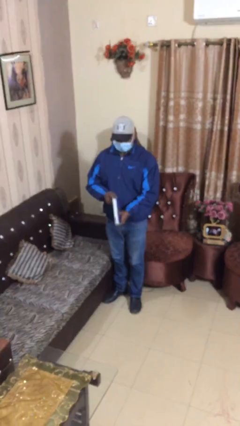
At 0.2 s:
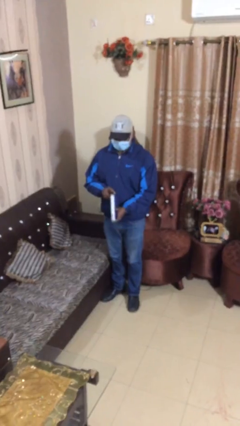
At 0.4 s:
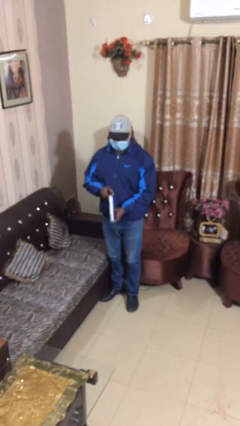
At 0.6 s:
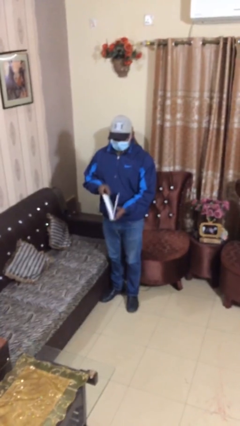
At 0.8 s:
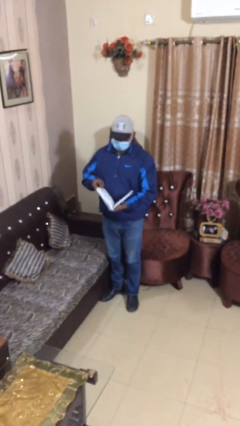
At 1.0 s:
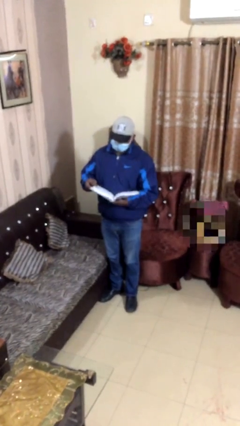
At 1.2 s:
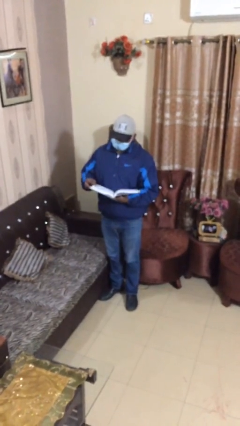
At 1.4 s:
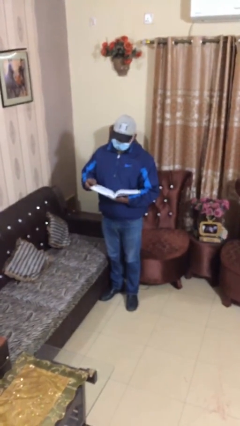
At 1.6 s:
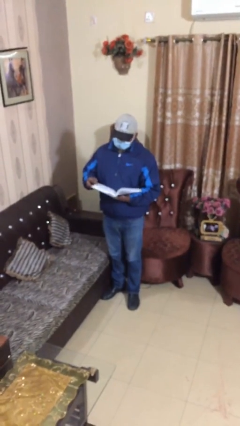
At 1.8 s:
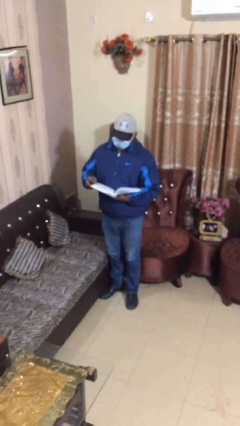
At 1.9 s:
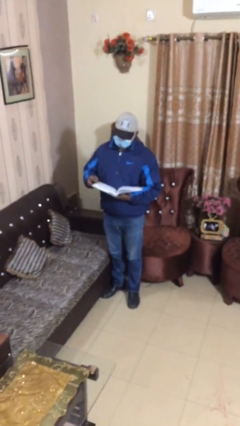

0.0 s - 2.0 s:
person reads document

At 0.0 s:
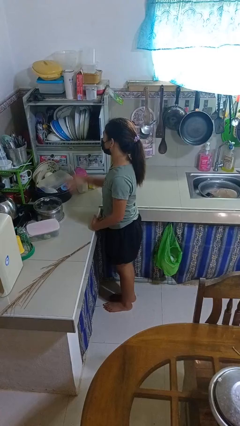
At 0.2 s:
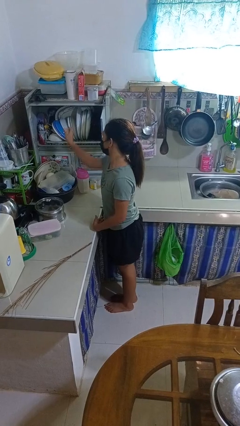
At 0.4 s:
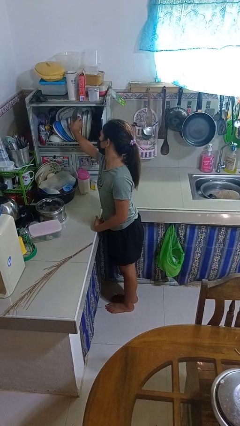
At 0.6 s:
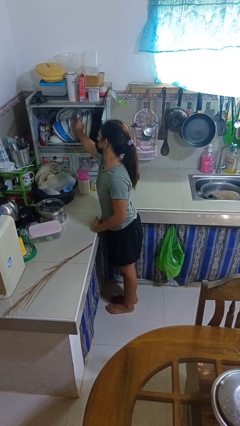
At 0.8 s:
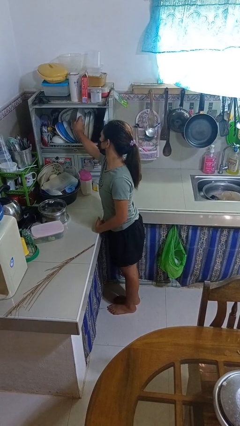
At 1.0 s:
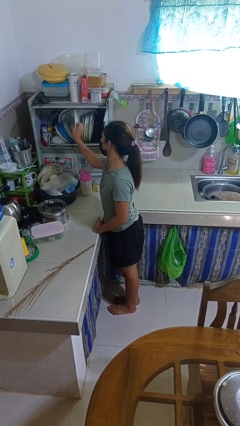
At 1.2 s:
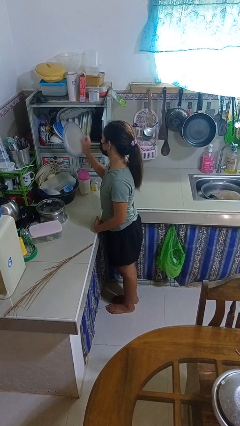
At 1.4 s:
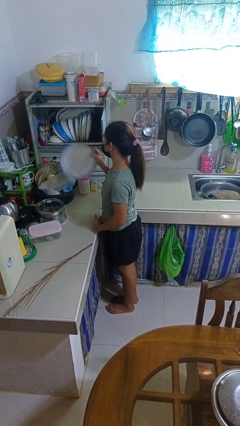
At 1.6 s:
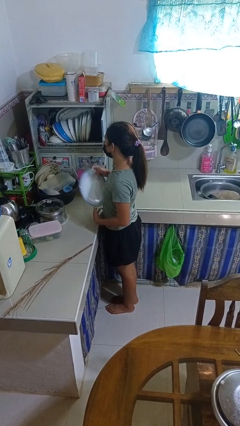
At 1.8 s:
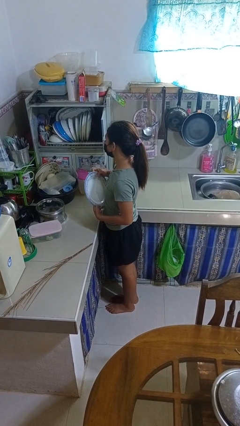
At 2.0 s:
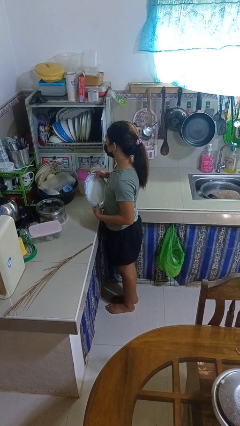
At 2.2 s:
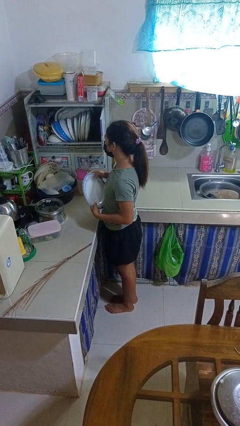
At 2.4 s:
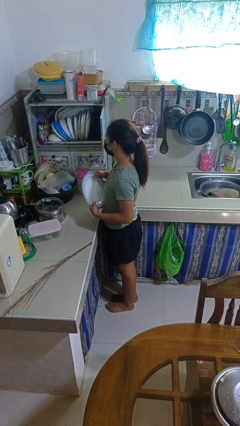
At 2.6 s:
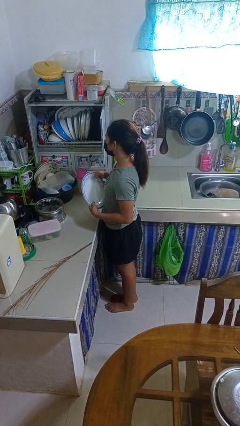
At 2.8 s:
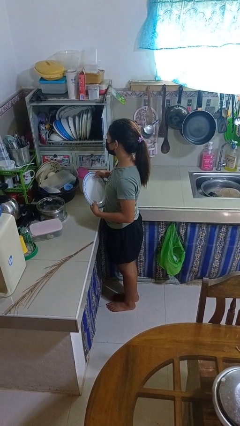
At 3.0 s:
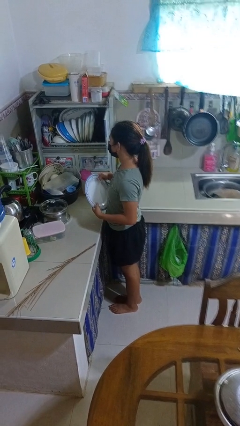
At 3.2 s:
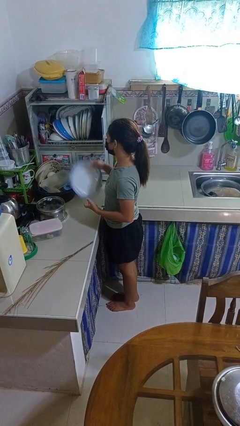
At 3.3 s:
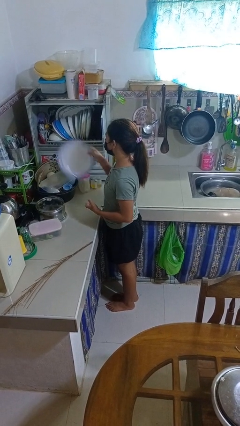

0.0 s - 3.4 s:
person takes object from kitchen drawer

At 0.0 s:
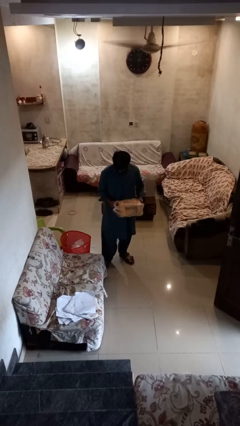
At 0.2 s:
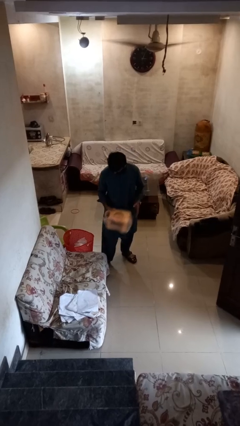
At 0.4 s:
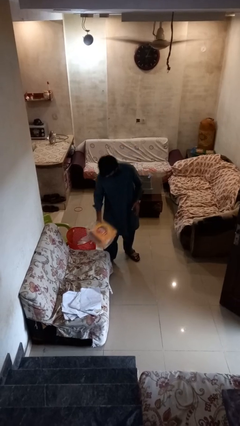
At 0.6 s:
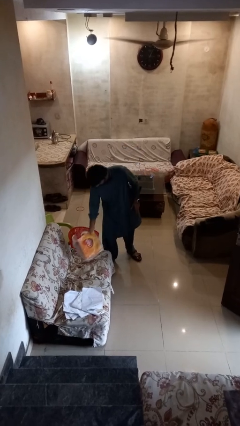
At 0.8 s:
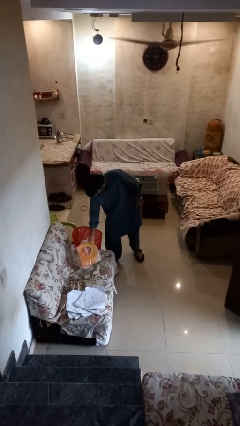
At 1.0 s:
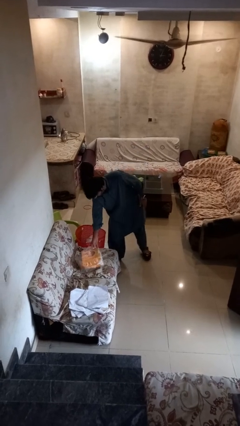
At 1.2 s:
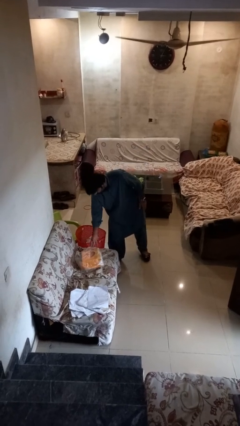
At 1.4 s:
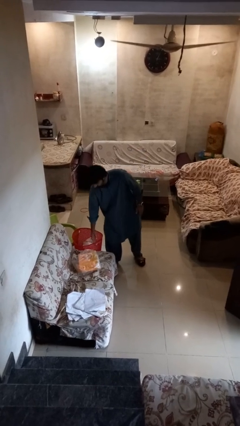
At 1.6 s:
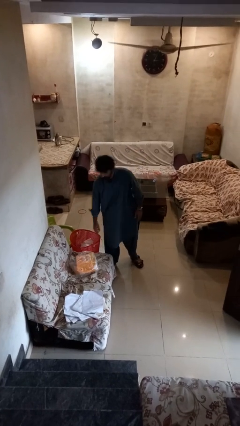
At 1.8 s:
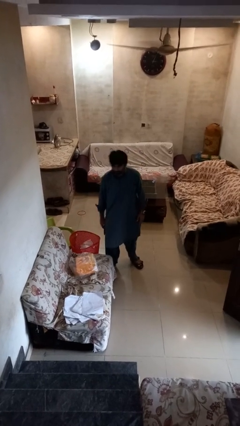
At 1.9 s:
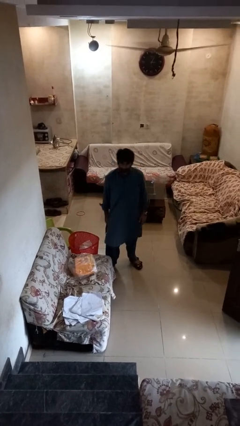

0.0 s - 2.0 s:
person puts down object on couch

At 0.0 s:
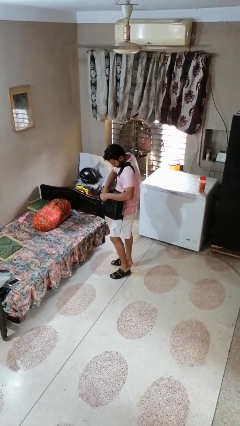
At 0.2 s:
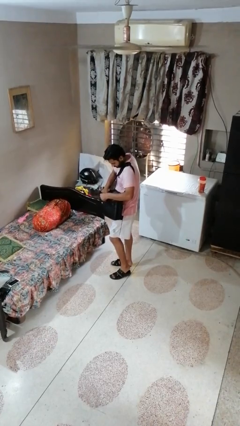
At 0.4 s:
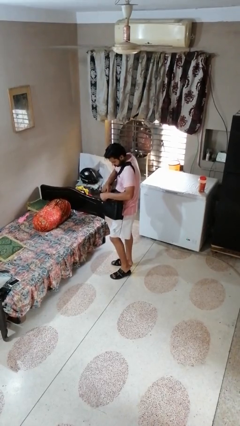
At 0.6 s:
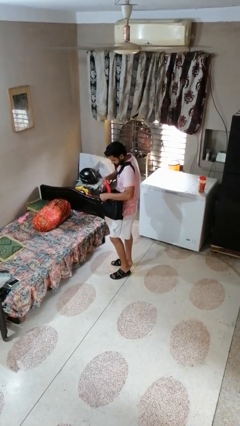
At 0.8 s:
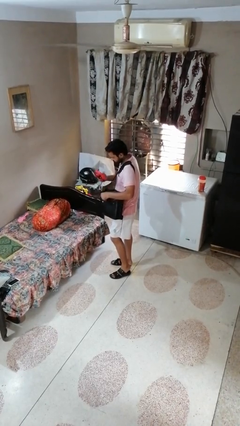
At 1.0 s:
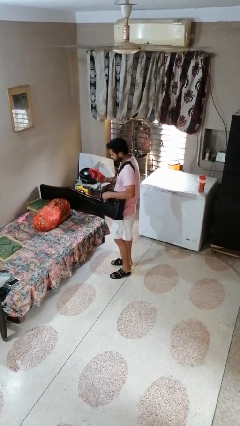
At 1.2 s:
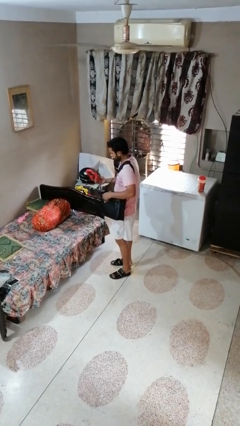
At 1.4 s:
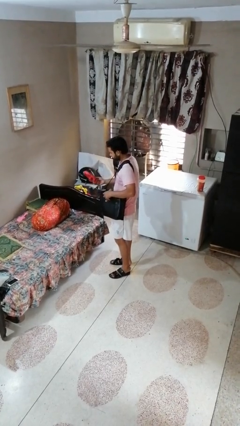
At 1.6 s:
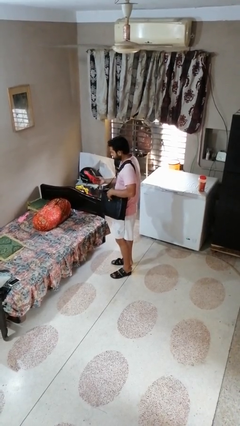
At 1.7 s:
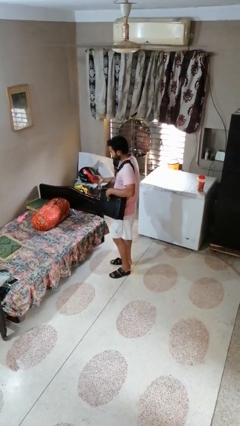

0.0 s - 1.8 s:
person takes object from backpack

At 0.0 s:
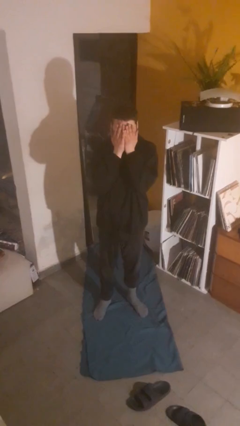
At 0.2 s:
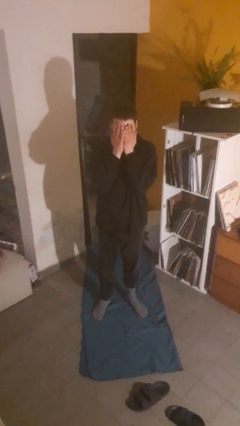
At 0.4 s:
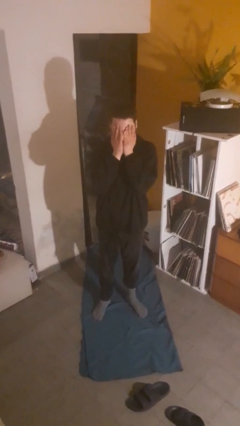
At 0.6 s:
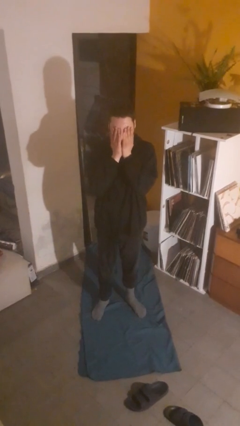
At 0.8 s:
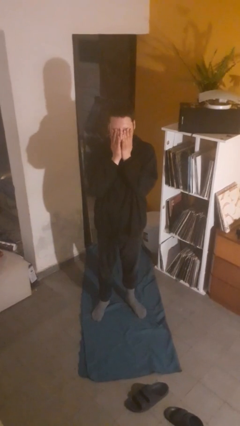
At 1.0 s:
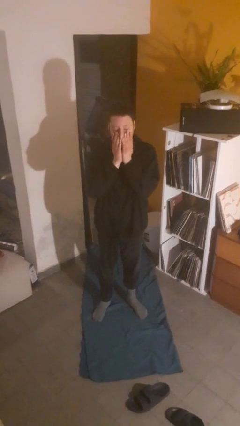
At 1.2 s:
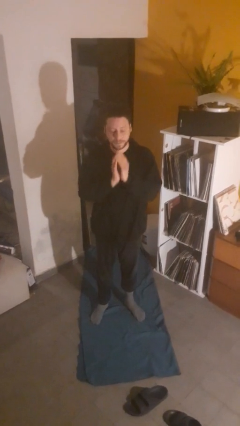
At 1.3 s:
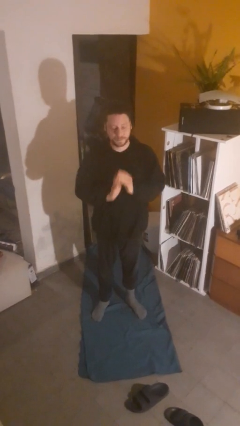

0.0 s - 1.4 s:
person covers face with hands

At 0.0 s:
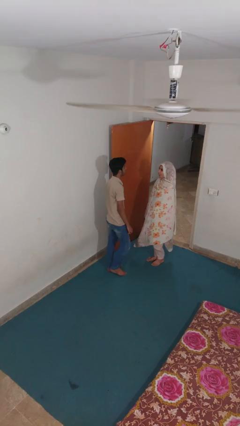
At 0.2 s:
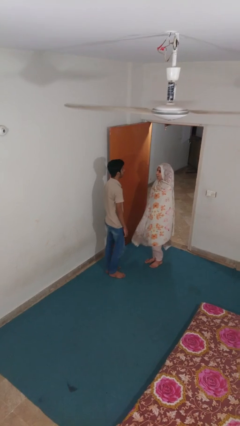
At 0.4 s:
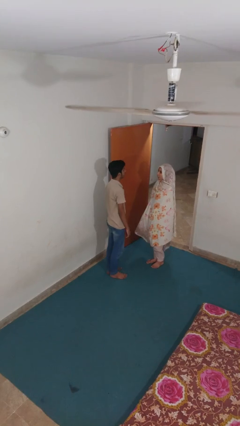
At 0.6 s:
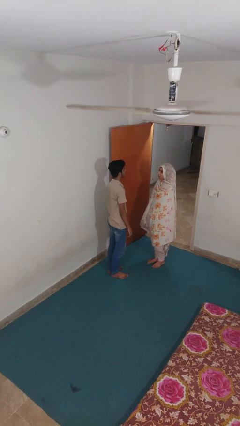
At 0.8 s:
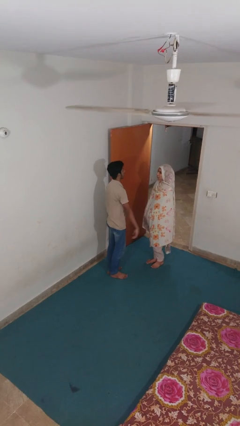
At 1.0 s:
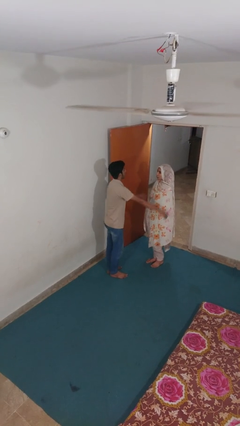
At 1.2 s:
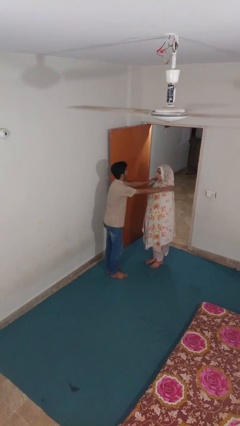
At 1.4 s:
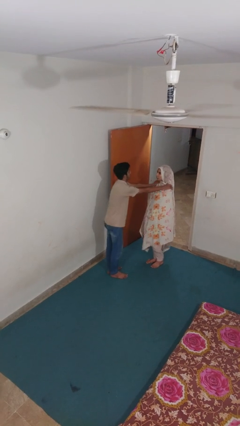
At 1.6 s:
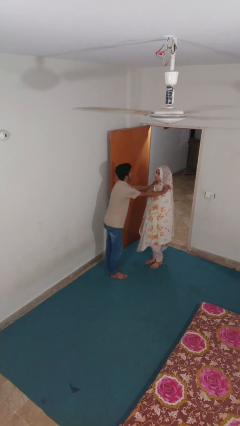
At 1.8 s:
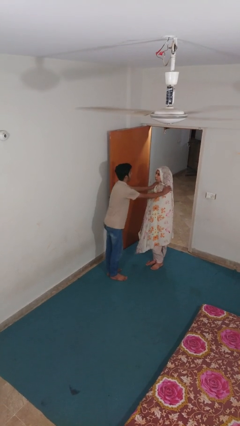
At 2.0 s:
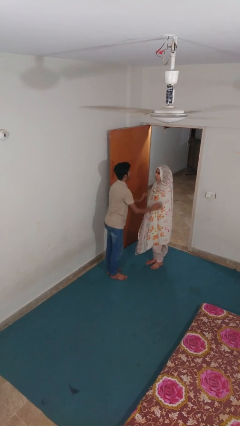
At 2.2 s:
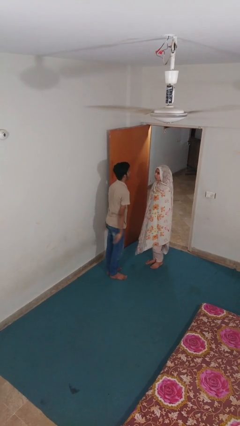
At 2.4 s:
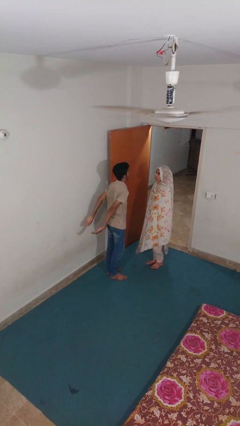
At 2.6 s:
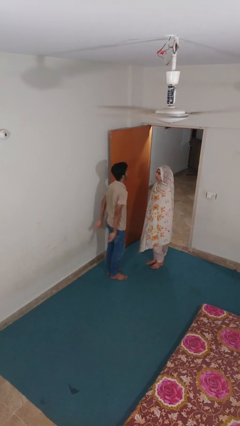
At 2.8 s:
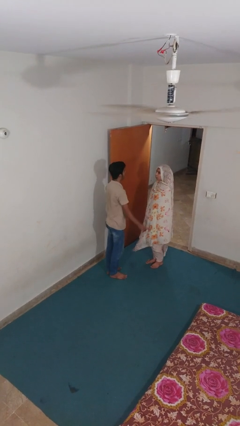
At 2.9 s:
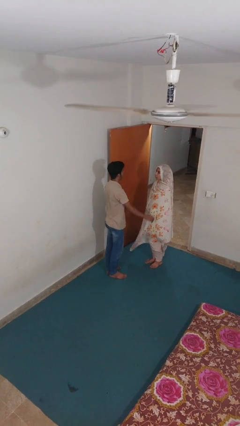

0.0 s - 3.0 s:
person pounds shoulders of person

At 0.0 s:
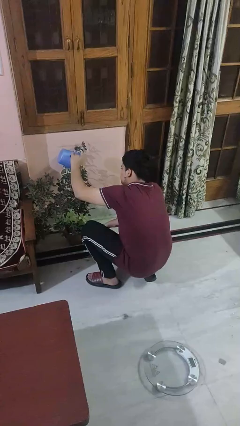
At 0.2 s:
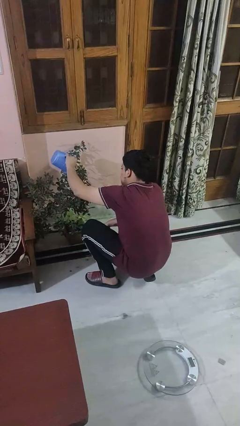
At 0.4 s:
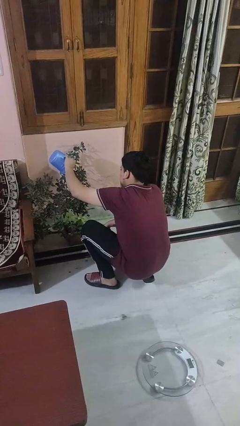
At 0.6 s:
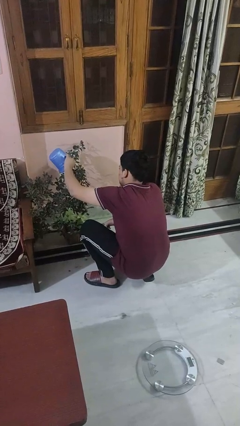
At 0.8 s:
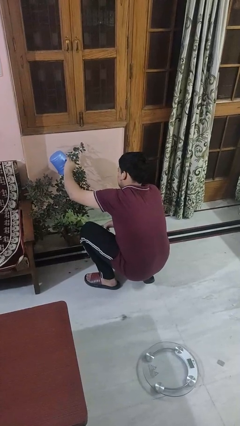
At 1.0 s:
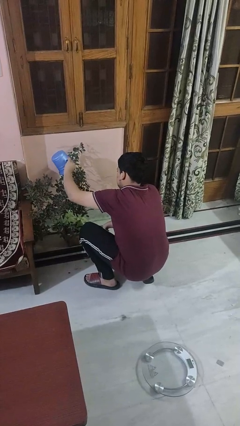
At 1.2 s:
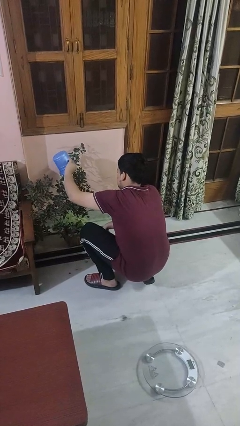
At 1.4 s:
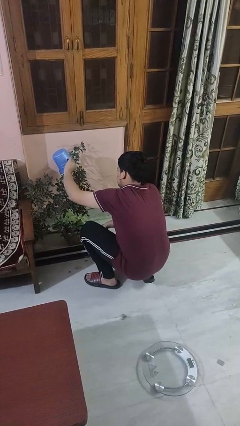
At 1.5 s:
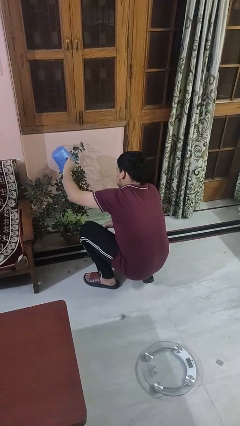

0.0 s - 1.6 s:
person waters houseplant

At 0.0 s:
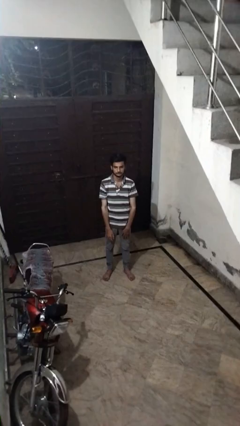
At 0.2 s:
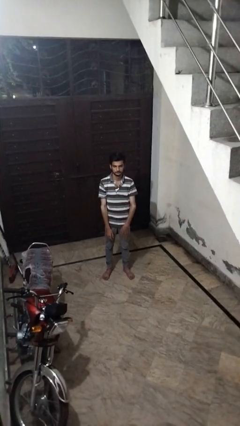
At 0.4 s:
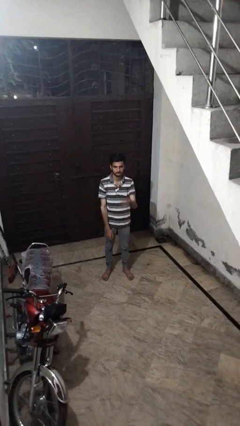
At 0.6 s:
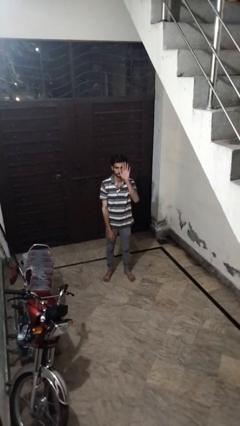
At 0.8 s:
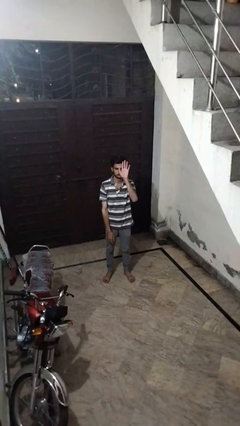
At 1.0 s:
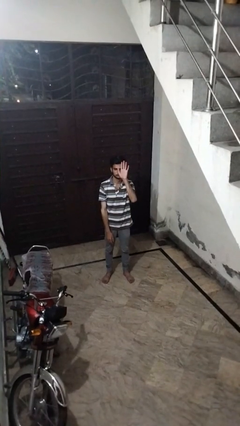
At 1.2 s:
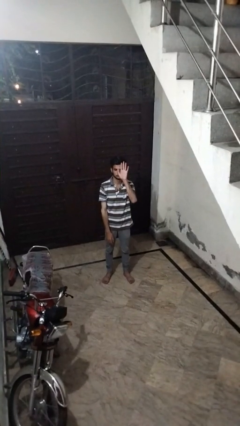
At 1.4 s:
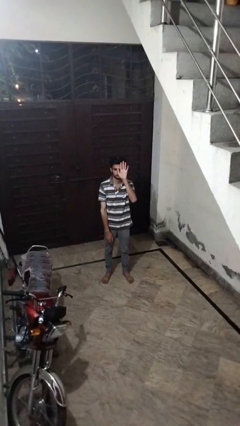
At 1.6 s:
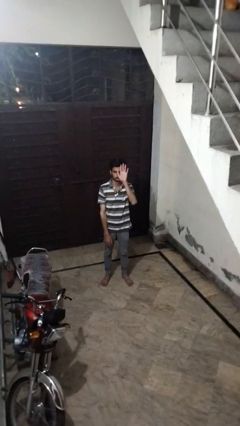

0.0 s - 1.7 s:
person gestures raise hand
